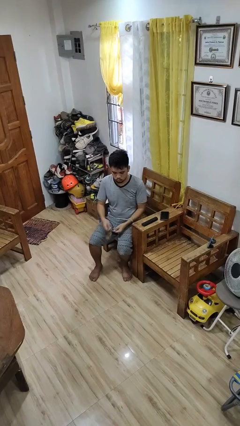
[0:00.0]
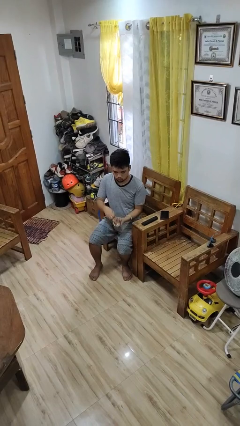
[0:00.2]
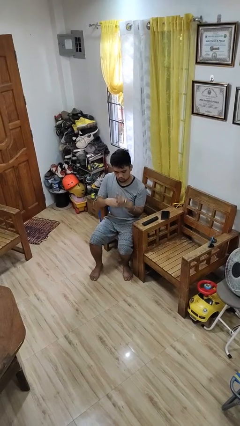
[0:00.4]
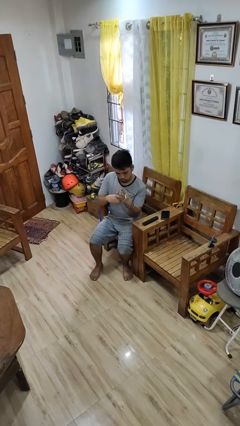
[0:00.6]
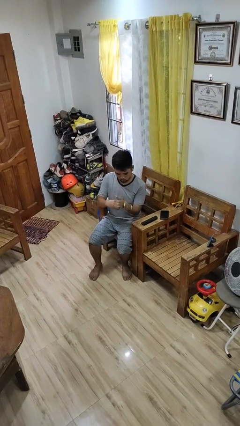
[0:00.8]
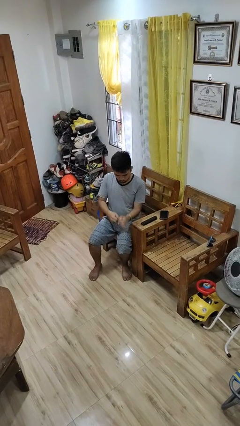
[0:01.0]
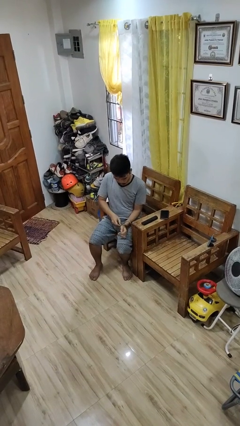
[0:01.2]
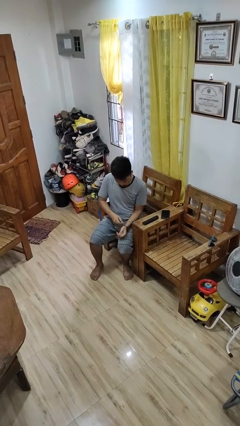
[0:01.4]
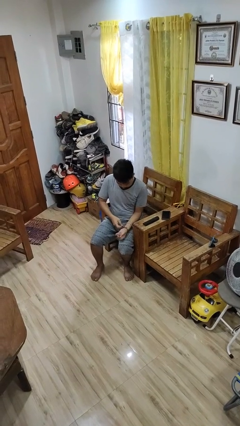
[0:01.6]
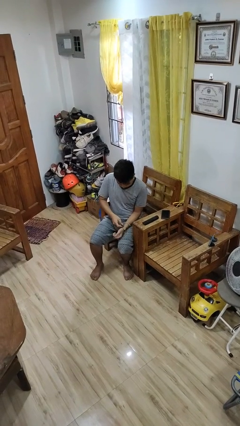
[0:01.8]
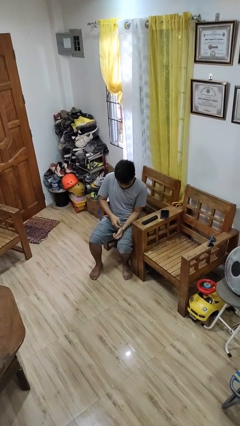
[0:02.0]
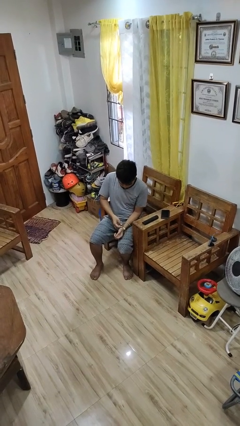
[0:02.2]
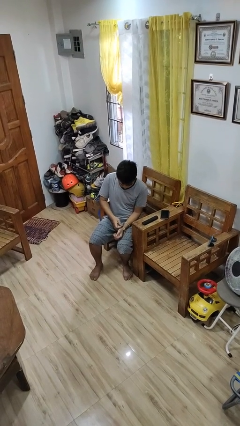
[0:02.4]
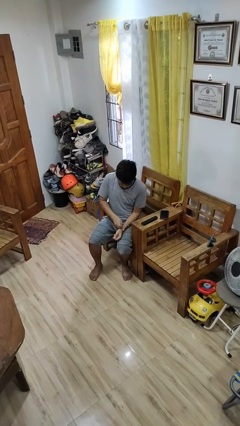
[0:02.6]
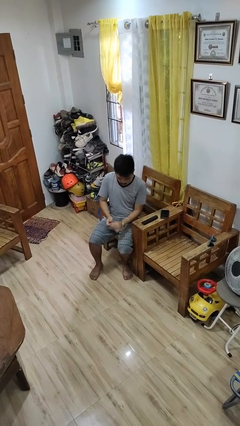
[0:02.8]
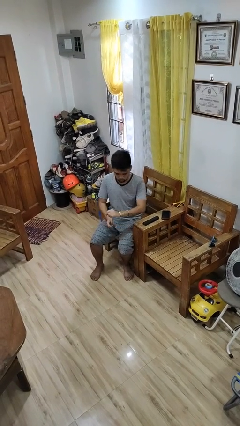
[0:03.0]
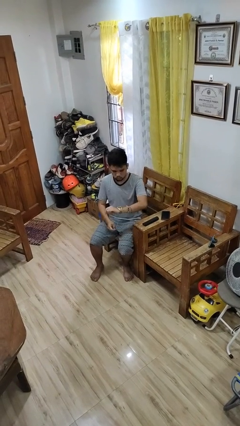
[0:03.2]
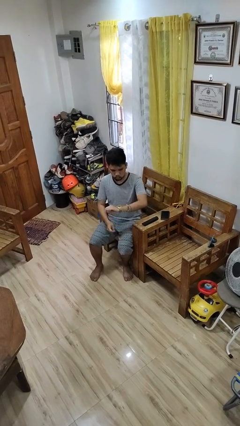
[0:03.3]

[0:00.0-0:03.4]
person puts on wristwatch

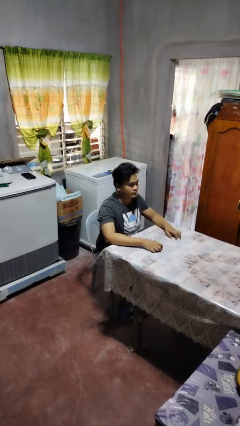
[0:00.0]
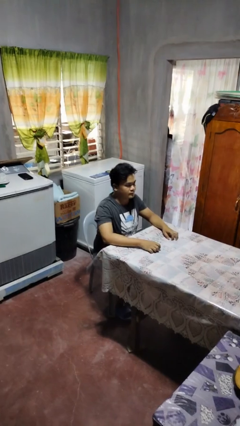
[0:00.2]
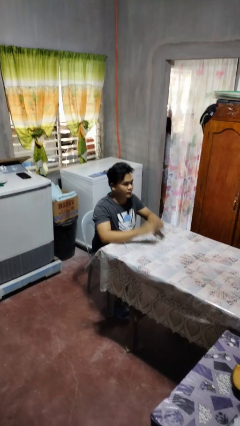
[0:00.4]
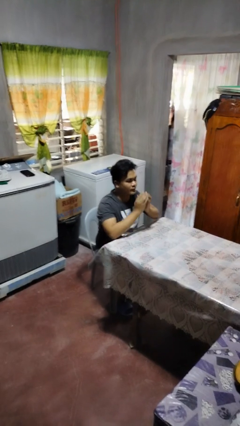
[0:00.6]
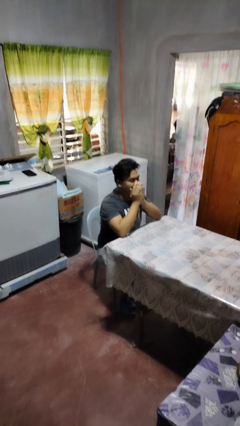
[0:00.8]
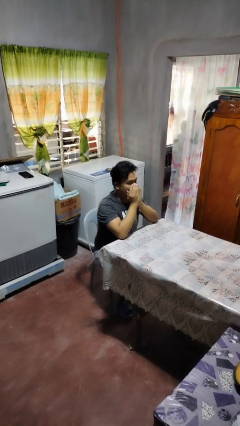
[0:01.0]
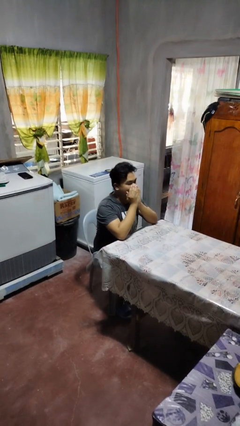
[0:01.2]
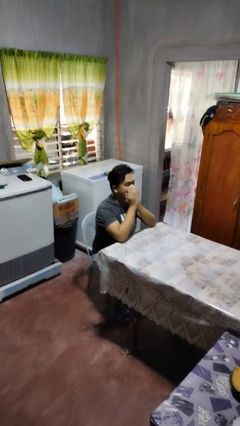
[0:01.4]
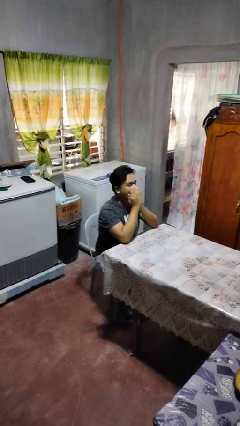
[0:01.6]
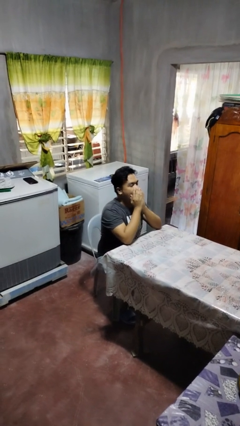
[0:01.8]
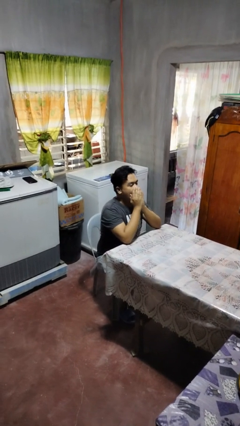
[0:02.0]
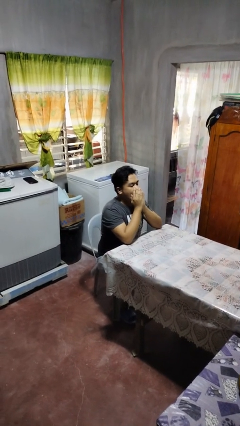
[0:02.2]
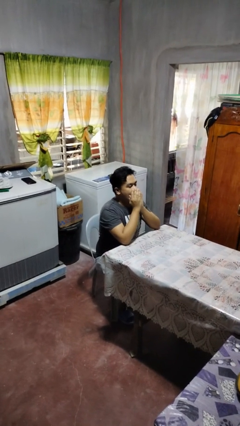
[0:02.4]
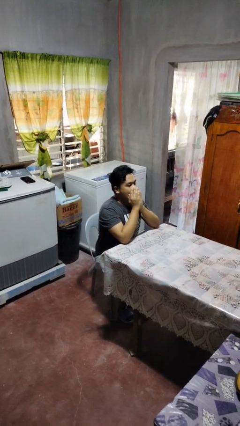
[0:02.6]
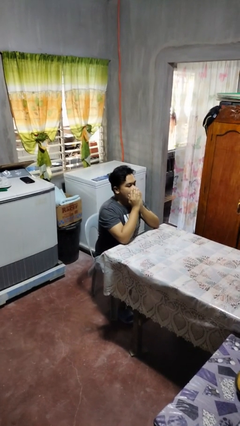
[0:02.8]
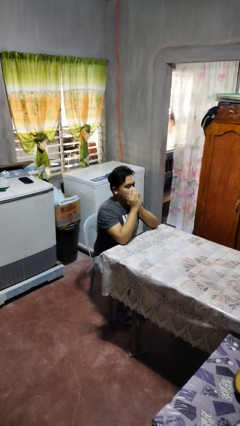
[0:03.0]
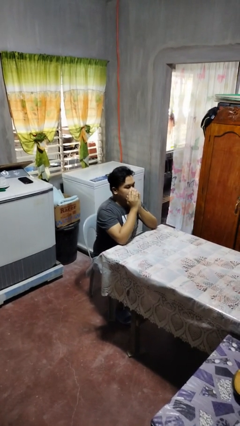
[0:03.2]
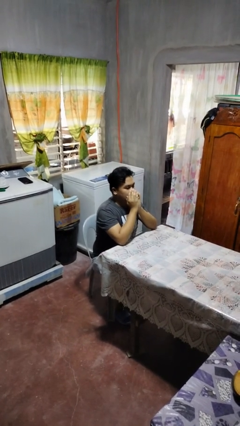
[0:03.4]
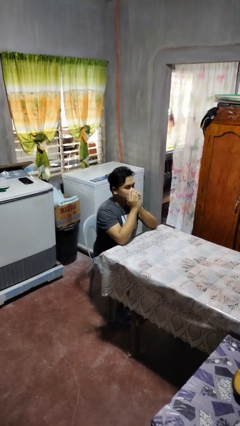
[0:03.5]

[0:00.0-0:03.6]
person yawns

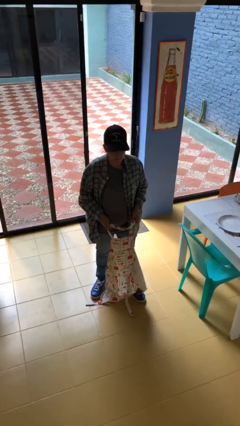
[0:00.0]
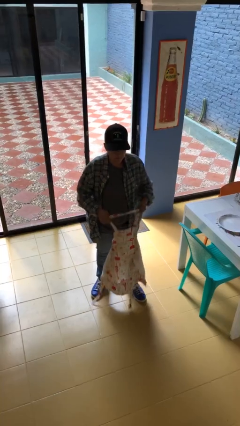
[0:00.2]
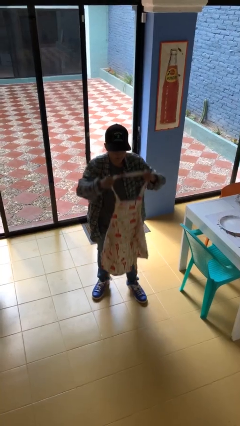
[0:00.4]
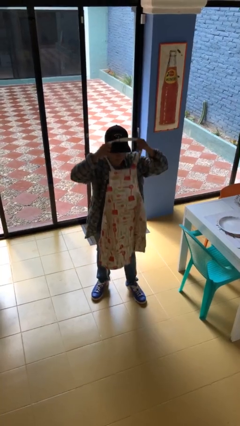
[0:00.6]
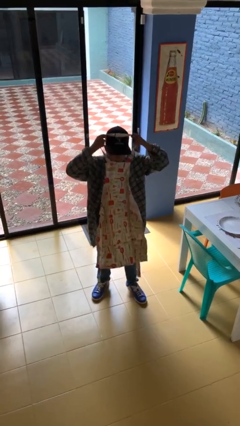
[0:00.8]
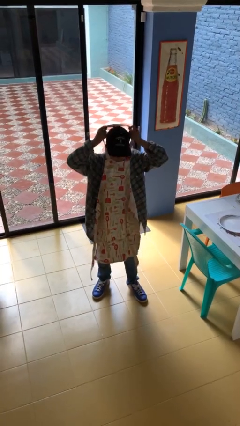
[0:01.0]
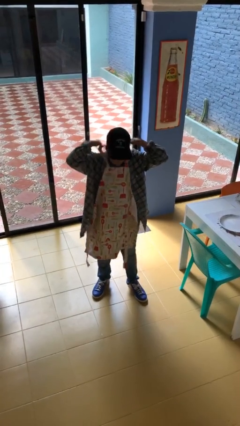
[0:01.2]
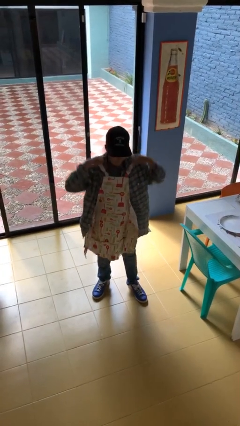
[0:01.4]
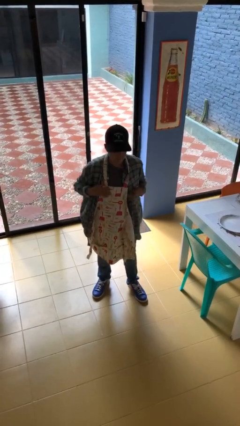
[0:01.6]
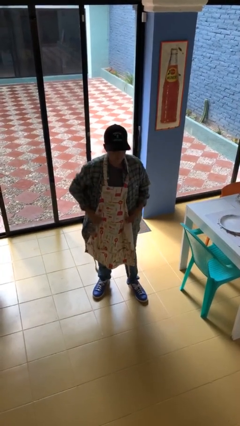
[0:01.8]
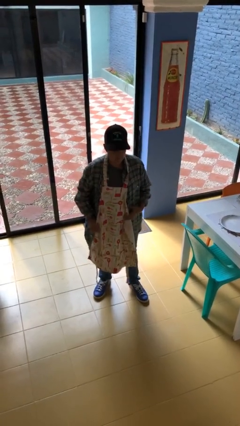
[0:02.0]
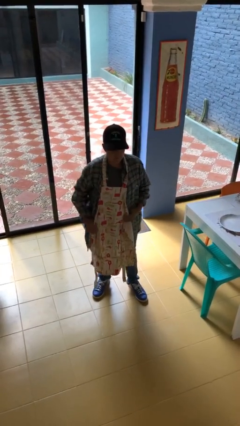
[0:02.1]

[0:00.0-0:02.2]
person puts on apron

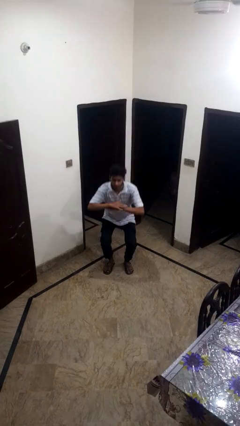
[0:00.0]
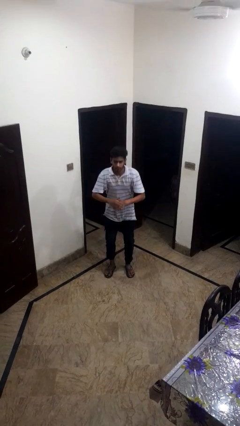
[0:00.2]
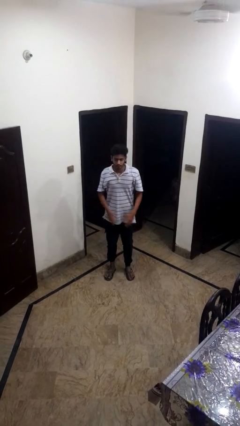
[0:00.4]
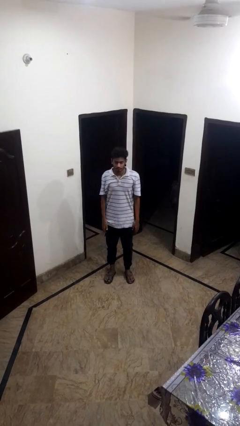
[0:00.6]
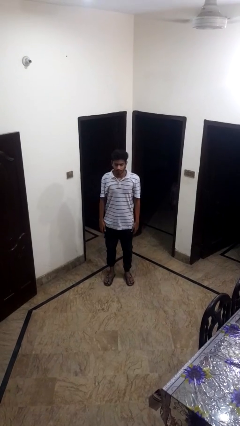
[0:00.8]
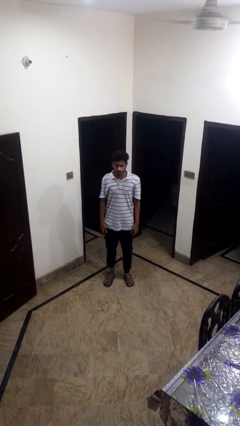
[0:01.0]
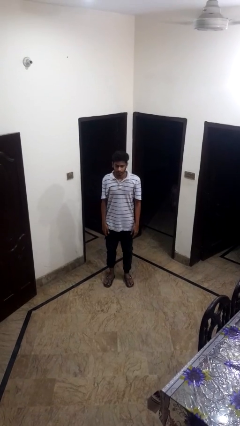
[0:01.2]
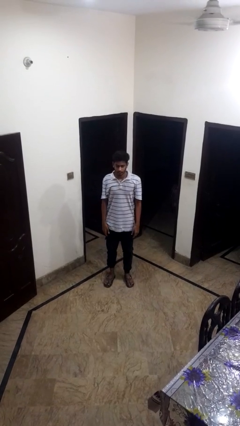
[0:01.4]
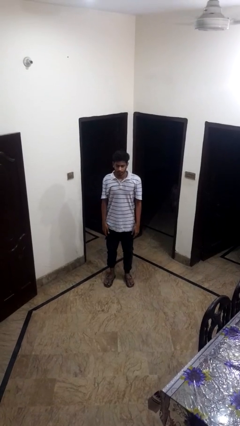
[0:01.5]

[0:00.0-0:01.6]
person stands up

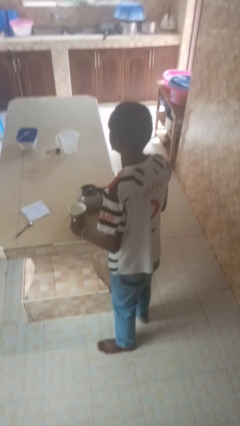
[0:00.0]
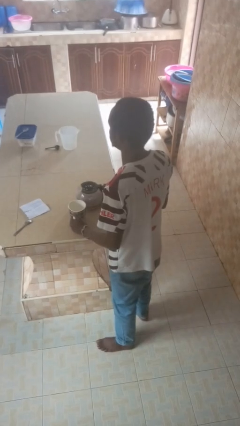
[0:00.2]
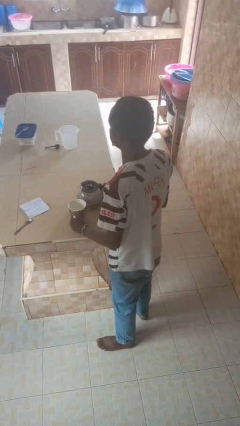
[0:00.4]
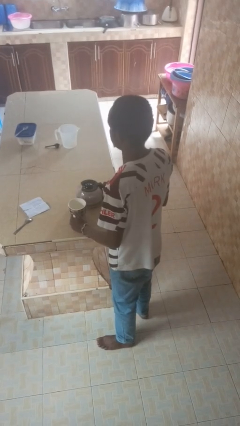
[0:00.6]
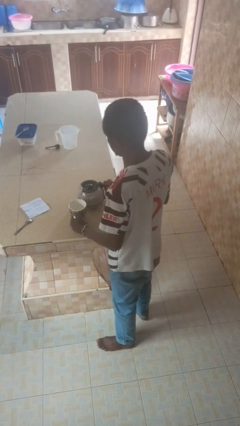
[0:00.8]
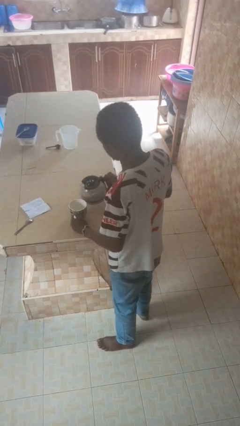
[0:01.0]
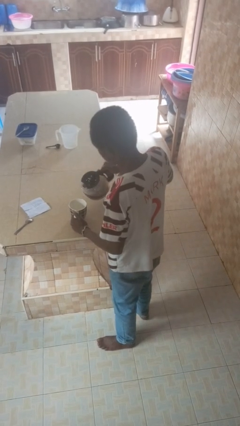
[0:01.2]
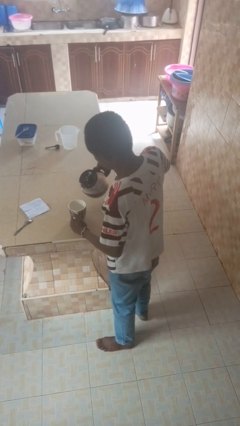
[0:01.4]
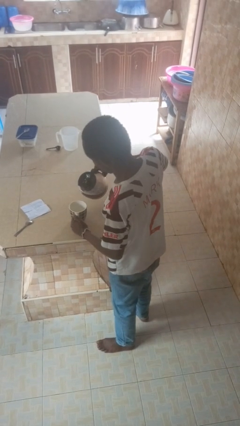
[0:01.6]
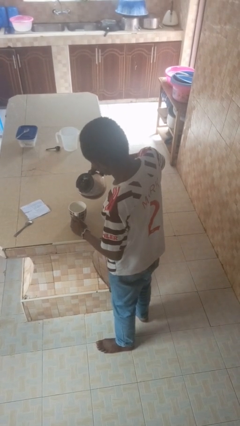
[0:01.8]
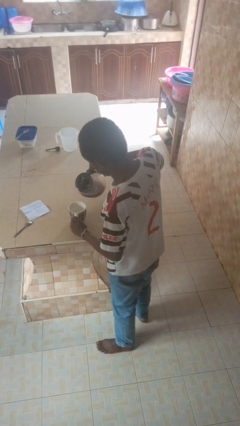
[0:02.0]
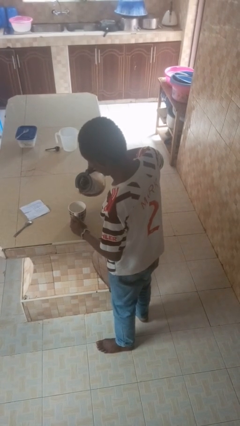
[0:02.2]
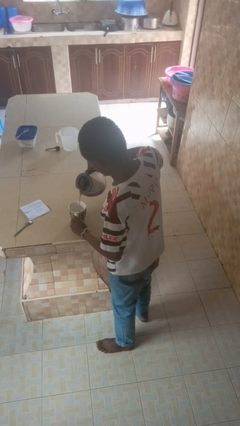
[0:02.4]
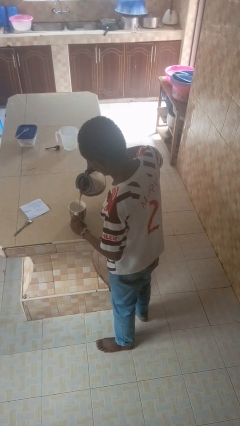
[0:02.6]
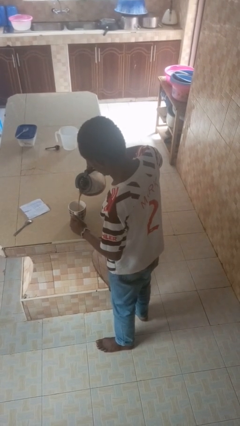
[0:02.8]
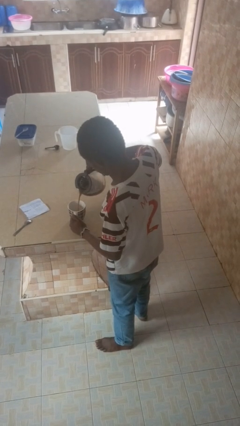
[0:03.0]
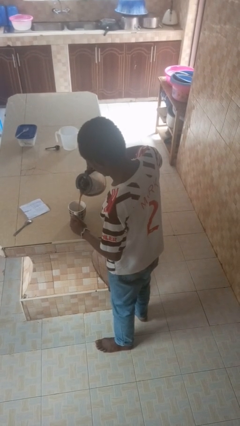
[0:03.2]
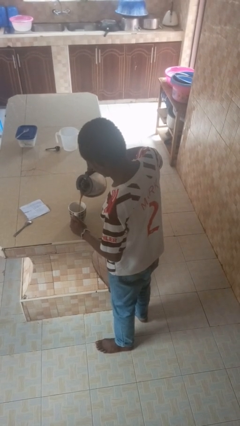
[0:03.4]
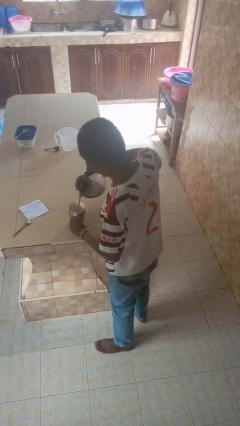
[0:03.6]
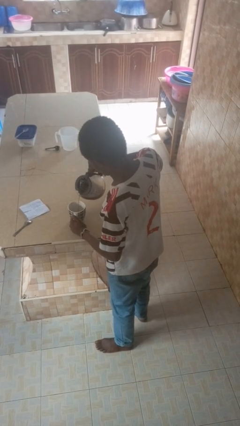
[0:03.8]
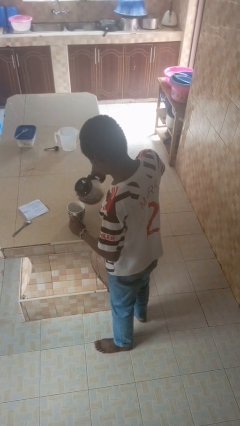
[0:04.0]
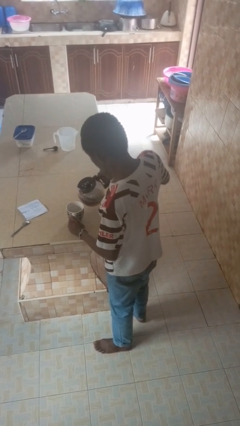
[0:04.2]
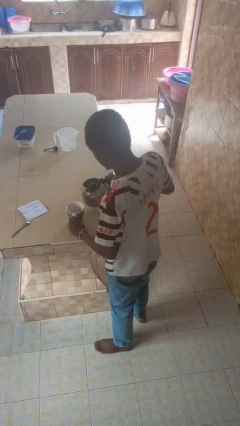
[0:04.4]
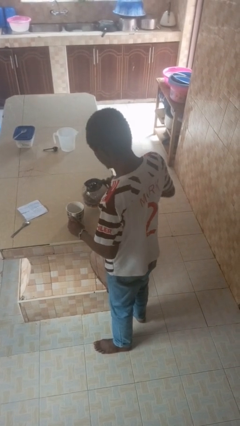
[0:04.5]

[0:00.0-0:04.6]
person pours coffee into mug

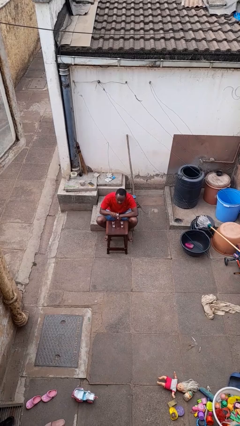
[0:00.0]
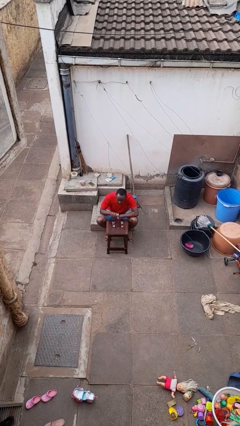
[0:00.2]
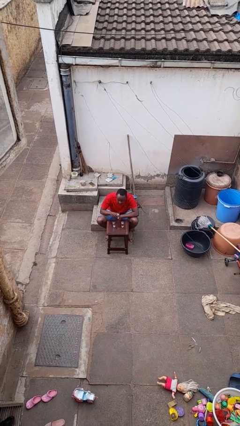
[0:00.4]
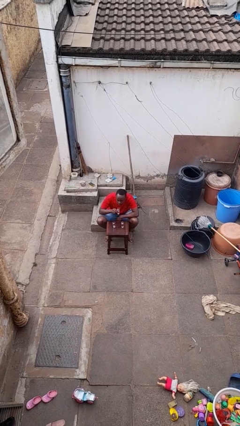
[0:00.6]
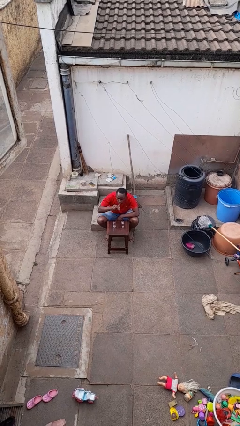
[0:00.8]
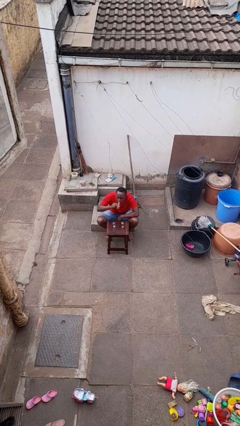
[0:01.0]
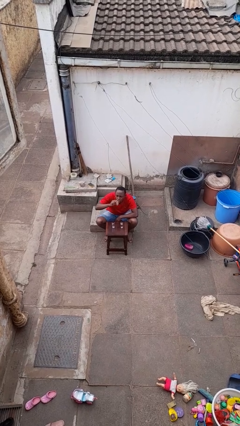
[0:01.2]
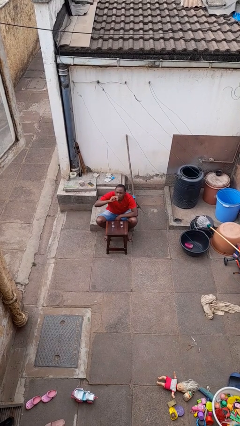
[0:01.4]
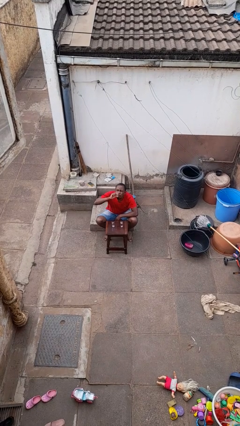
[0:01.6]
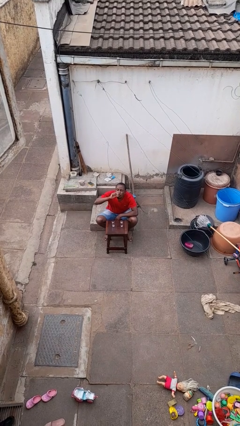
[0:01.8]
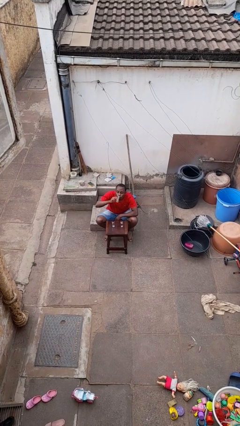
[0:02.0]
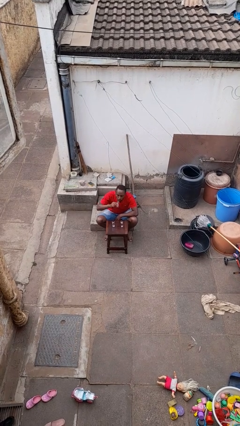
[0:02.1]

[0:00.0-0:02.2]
person drinks from shotglass

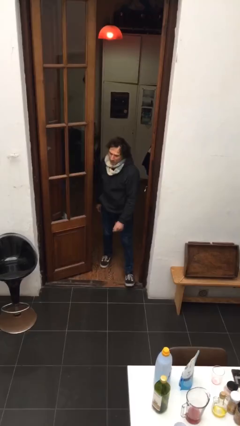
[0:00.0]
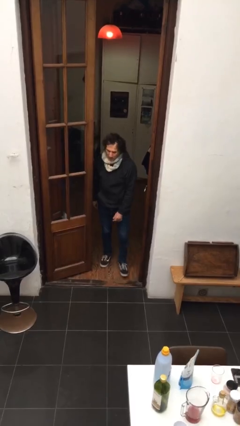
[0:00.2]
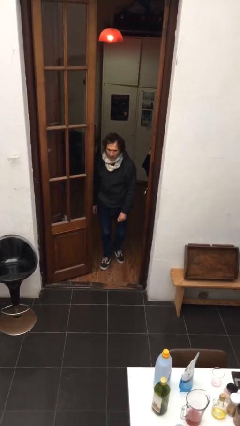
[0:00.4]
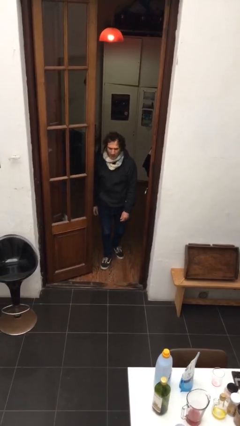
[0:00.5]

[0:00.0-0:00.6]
person stands up from floor
